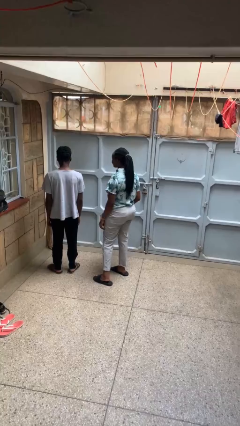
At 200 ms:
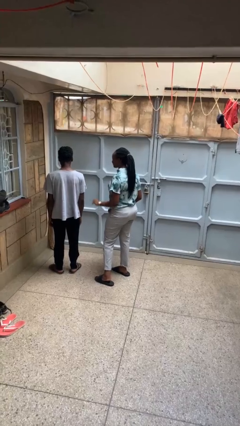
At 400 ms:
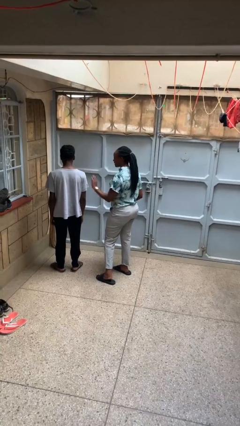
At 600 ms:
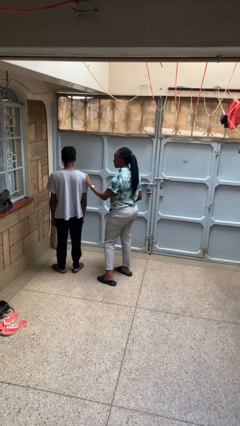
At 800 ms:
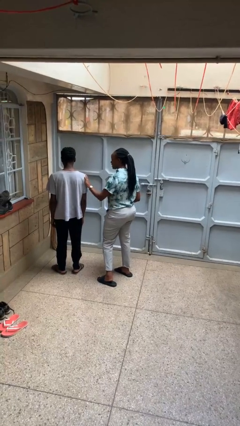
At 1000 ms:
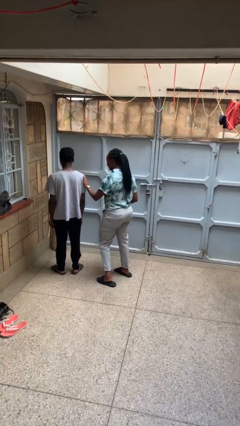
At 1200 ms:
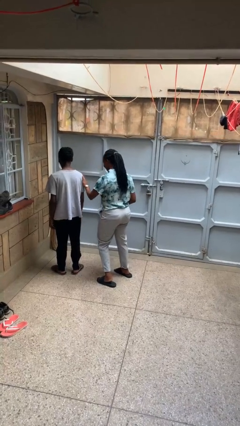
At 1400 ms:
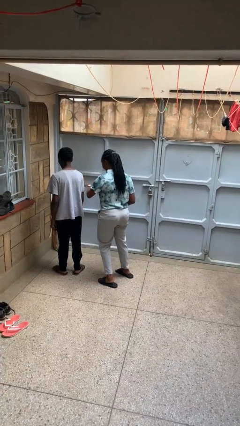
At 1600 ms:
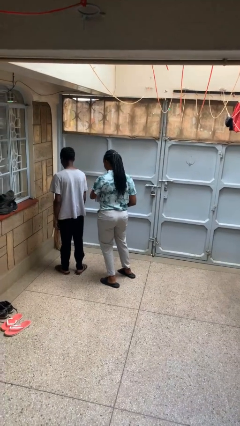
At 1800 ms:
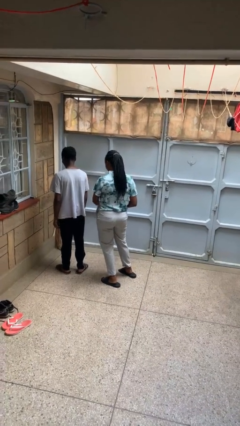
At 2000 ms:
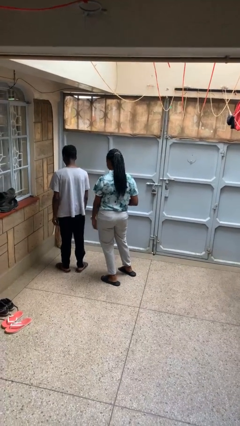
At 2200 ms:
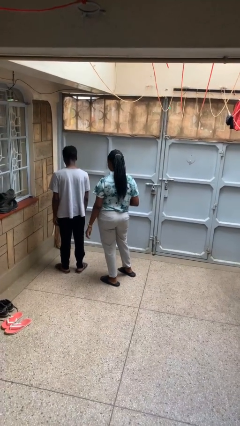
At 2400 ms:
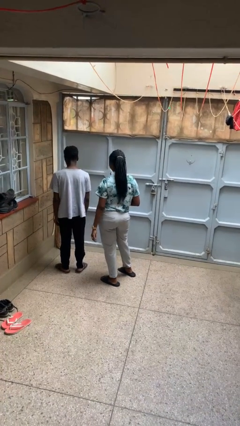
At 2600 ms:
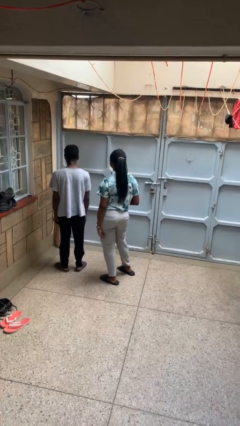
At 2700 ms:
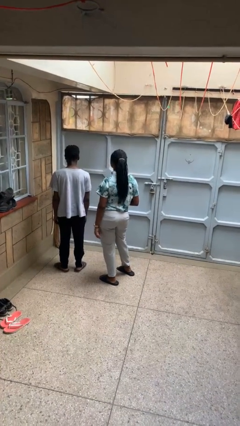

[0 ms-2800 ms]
person shoves person

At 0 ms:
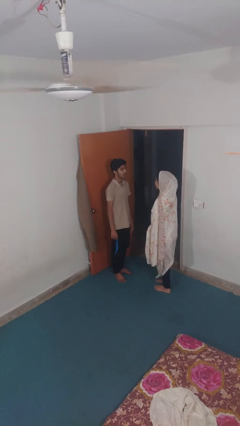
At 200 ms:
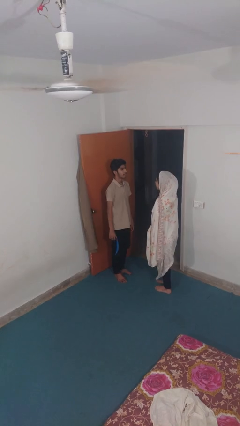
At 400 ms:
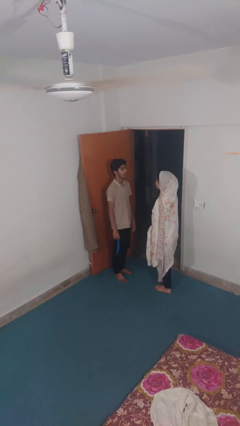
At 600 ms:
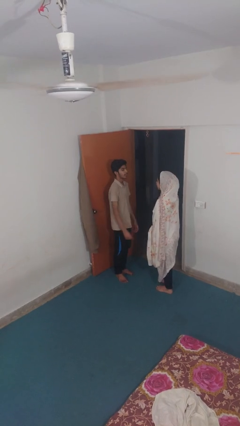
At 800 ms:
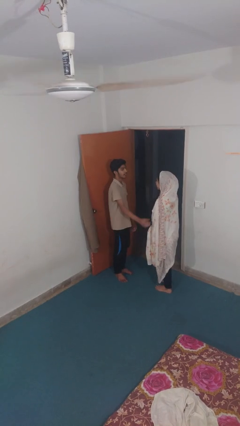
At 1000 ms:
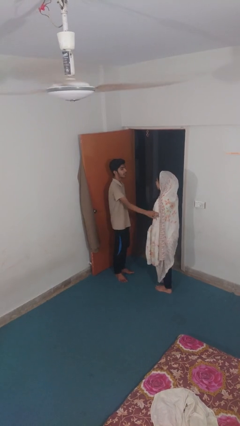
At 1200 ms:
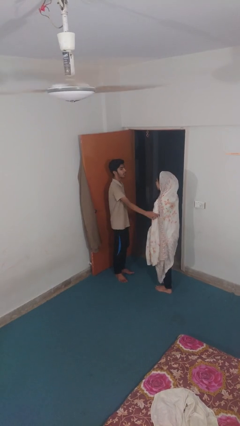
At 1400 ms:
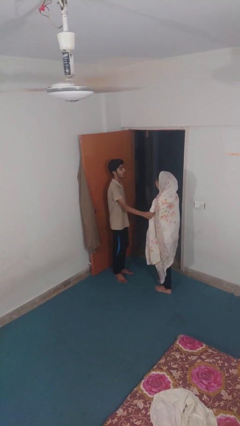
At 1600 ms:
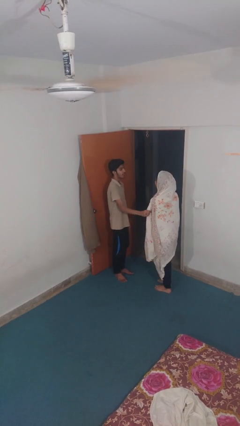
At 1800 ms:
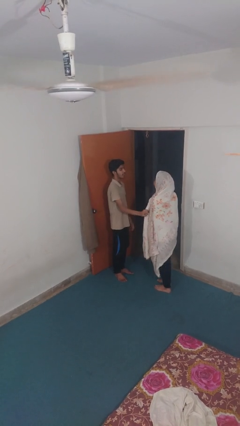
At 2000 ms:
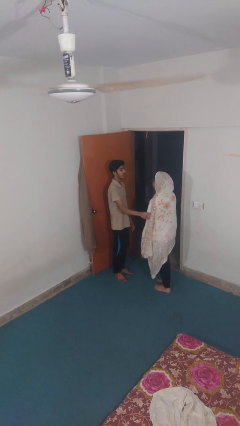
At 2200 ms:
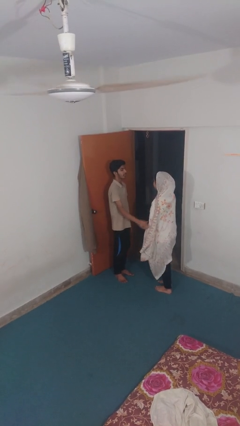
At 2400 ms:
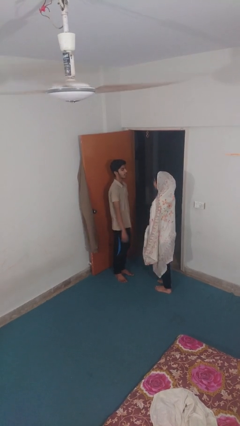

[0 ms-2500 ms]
person grabs person by bicep

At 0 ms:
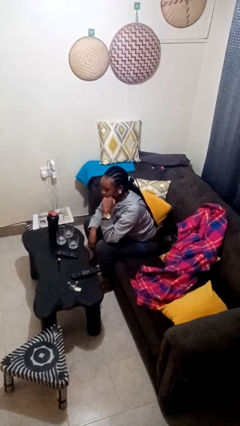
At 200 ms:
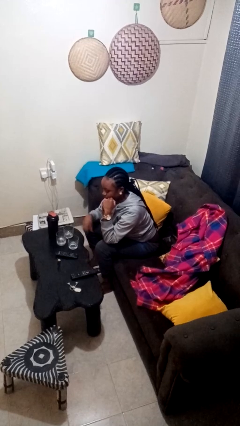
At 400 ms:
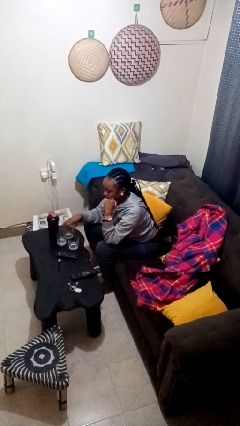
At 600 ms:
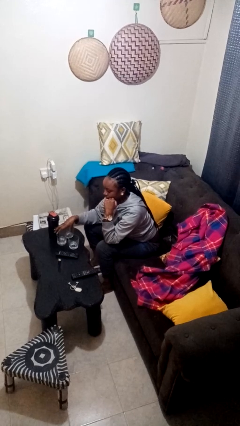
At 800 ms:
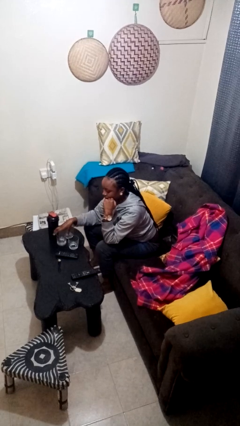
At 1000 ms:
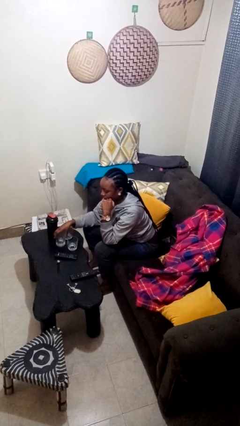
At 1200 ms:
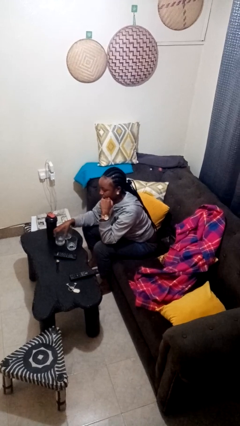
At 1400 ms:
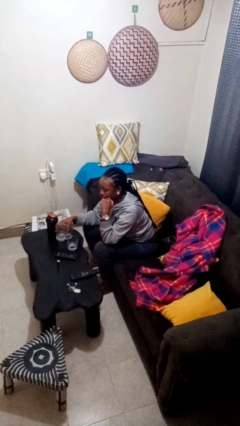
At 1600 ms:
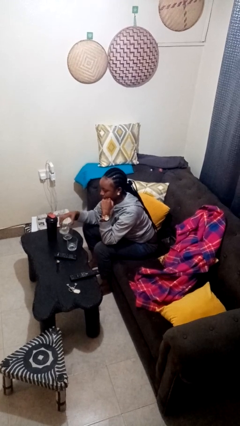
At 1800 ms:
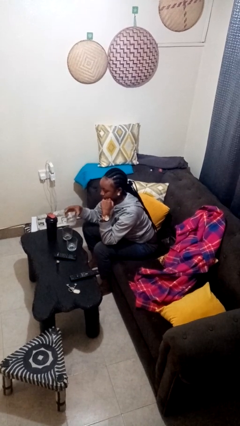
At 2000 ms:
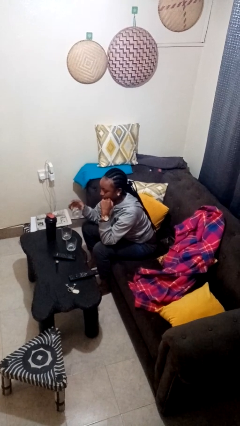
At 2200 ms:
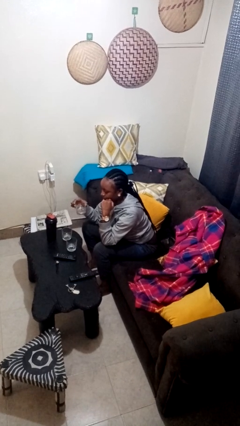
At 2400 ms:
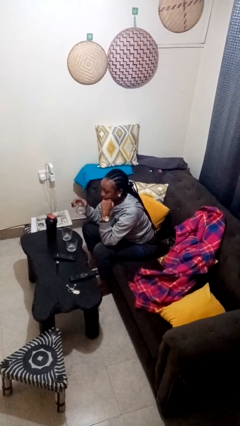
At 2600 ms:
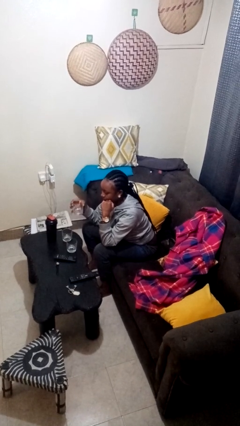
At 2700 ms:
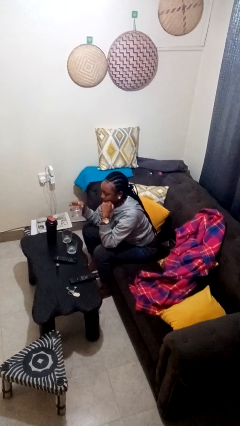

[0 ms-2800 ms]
person picks up object from table

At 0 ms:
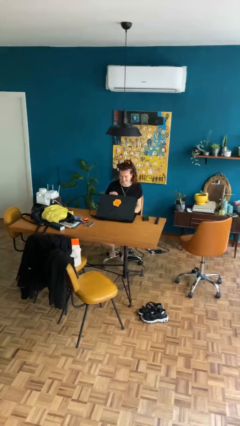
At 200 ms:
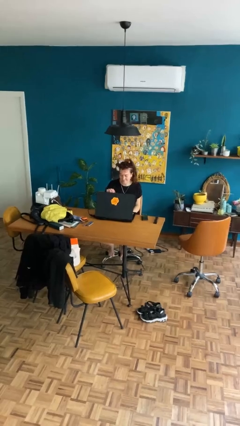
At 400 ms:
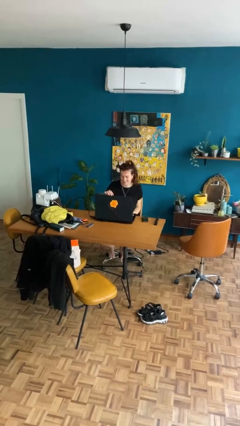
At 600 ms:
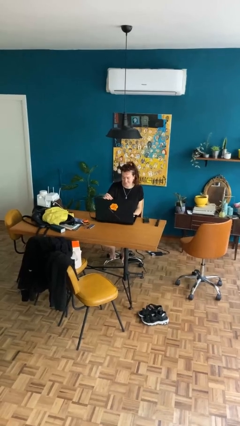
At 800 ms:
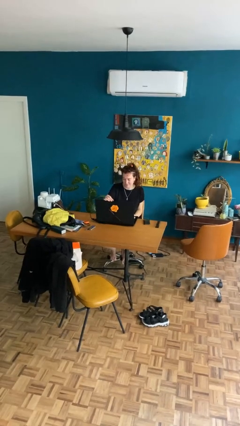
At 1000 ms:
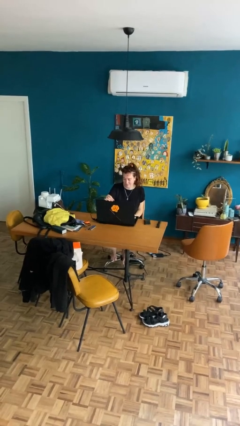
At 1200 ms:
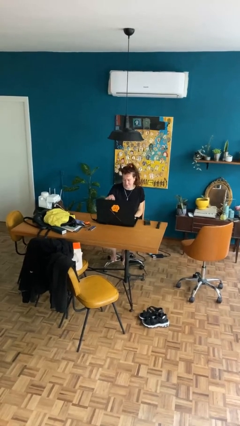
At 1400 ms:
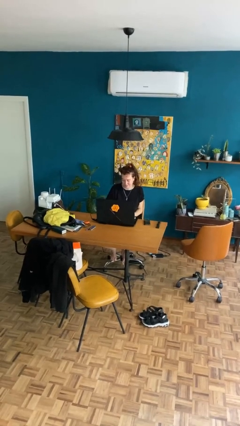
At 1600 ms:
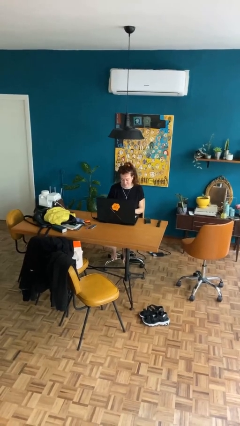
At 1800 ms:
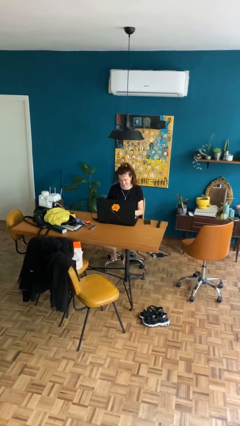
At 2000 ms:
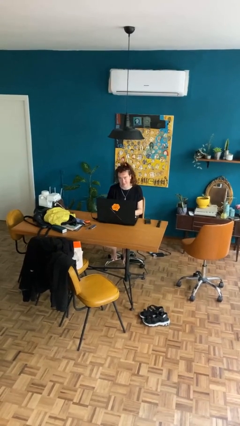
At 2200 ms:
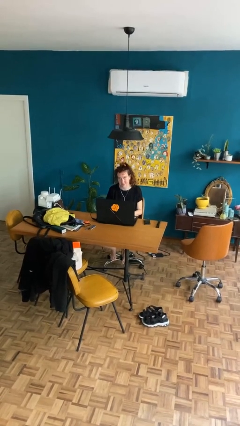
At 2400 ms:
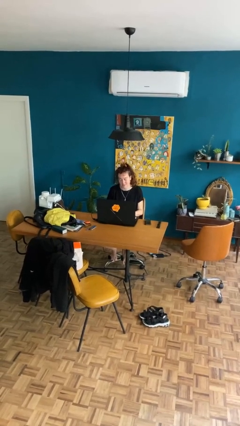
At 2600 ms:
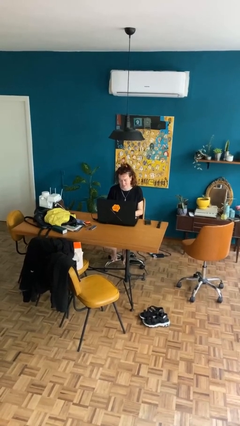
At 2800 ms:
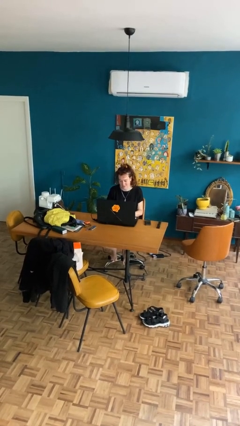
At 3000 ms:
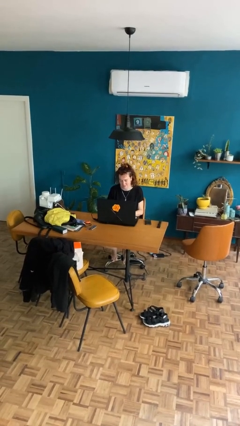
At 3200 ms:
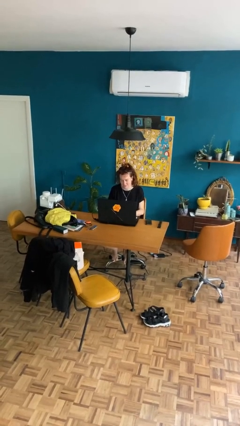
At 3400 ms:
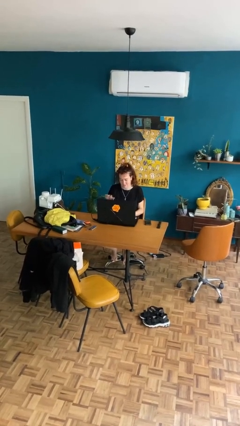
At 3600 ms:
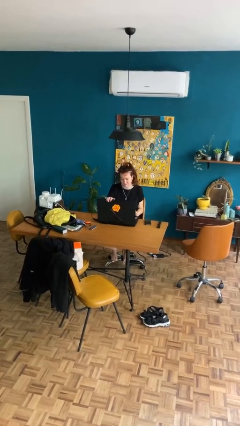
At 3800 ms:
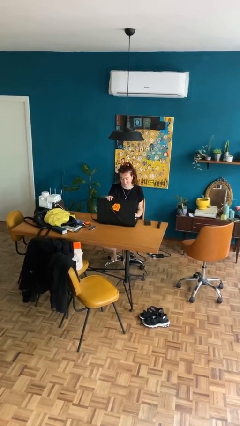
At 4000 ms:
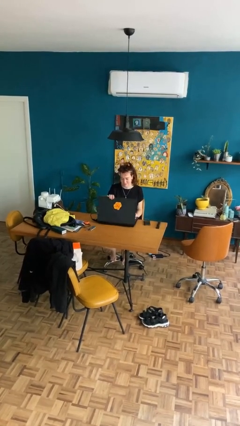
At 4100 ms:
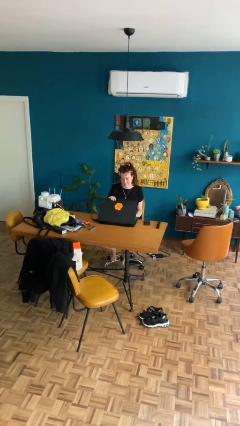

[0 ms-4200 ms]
person interacts with laptop

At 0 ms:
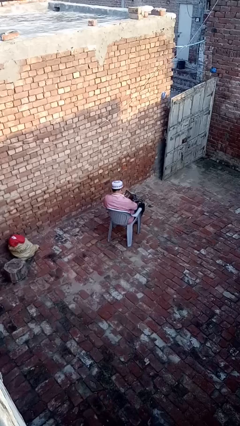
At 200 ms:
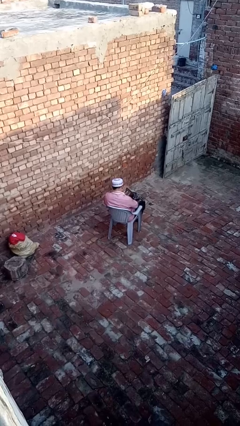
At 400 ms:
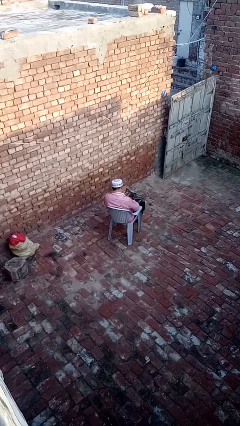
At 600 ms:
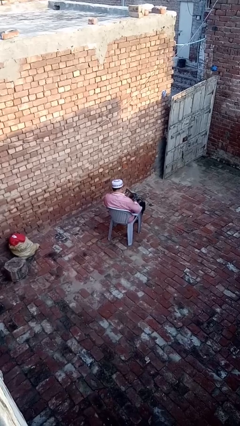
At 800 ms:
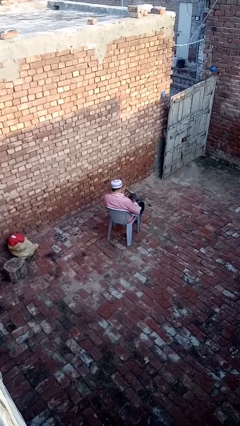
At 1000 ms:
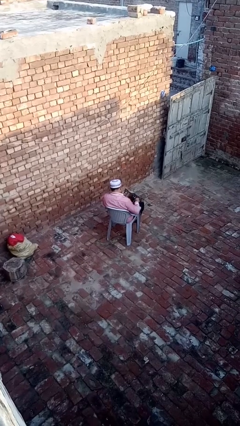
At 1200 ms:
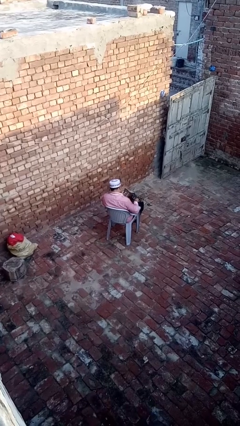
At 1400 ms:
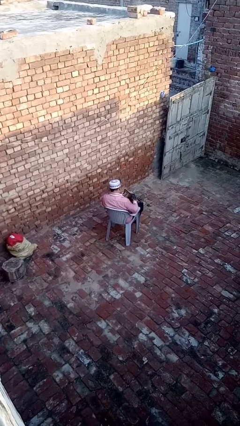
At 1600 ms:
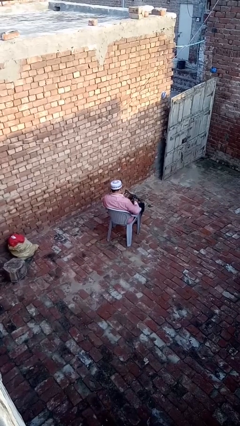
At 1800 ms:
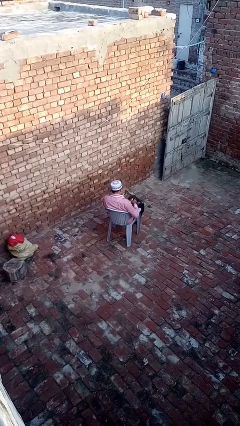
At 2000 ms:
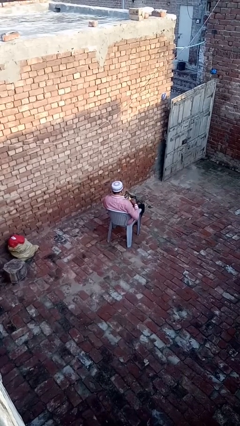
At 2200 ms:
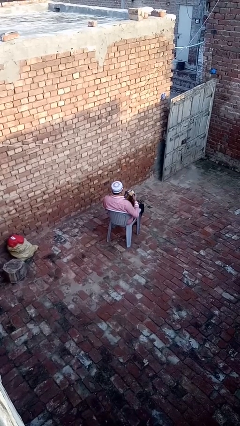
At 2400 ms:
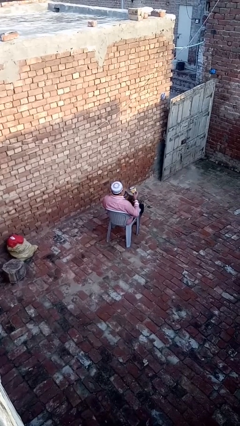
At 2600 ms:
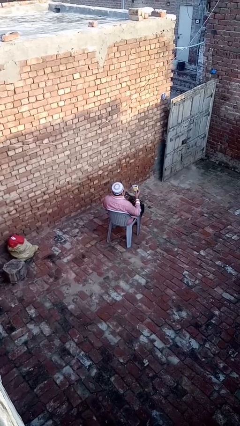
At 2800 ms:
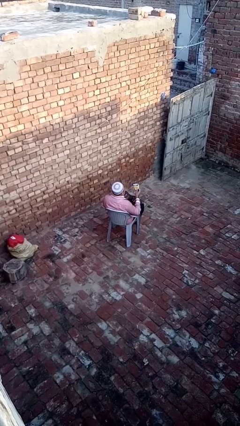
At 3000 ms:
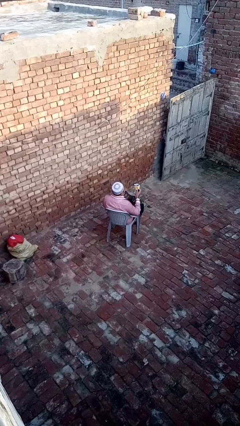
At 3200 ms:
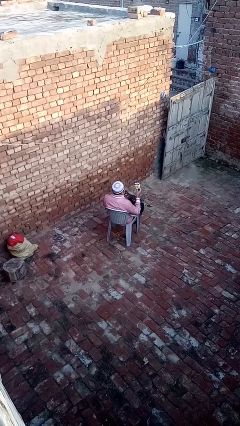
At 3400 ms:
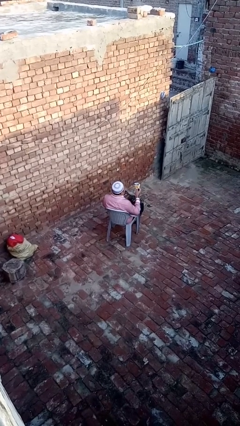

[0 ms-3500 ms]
person takes object from purse

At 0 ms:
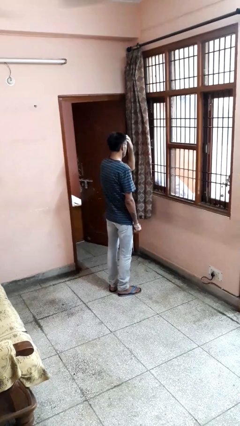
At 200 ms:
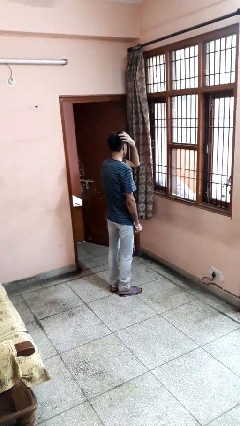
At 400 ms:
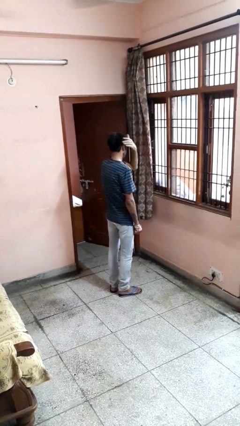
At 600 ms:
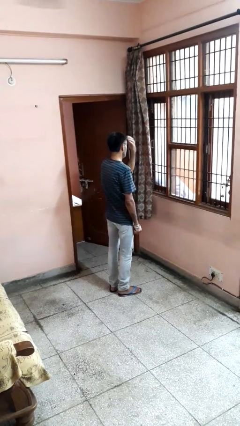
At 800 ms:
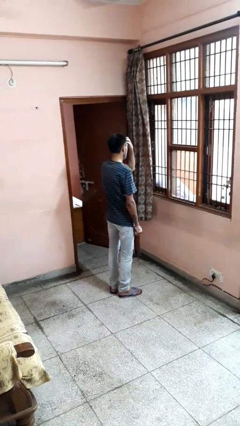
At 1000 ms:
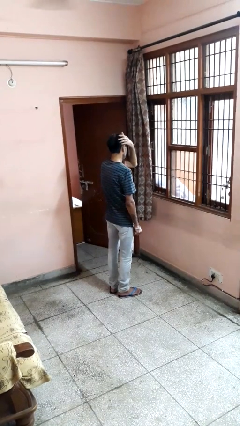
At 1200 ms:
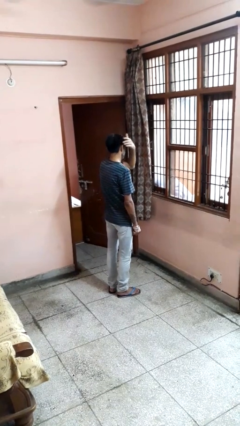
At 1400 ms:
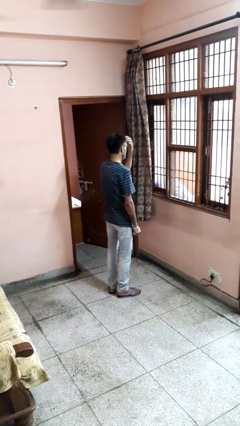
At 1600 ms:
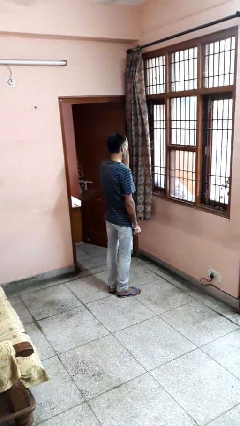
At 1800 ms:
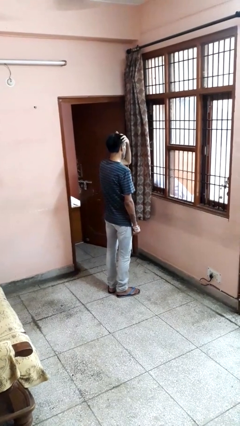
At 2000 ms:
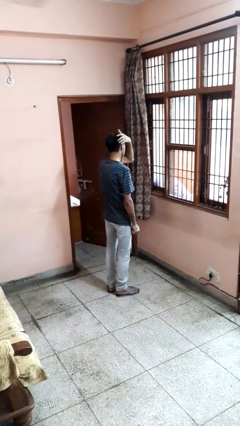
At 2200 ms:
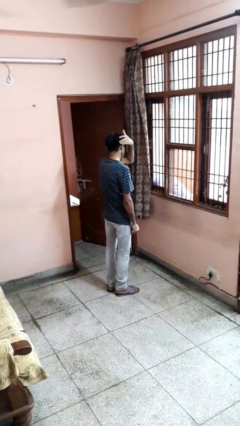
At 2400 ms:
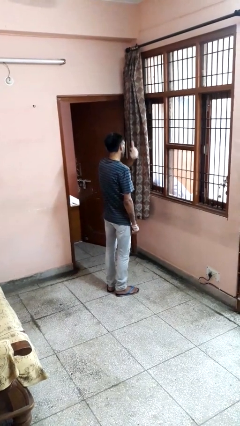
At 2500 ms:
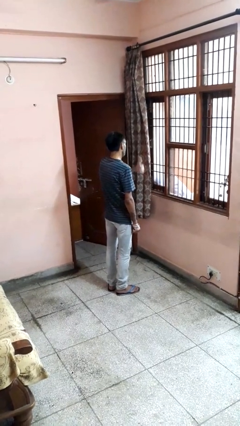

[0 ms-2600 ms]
person strokes hair
